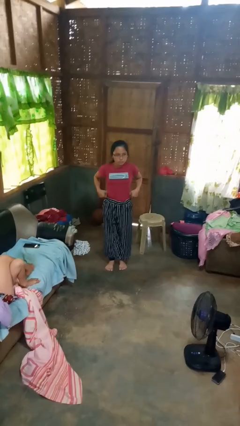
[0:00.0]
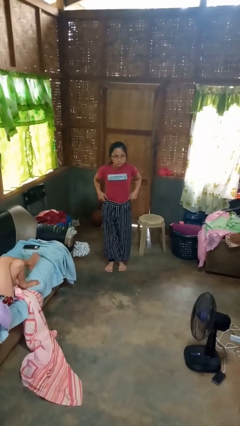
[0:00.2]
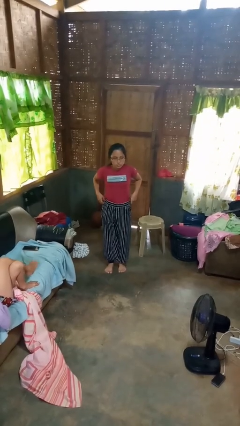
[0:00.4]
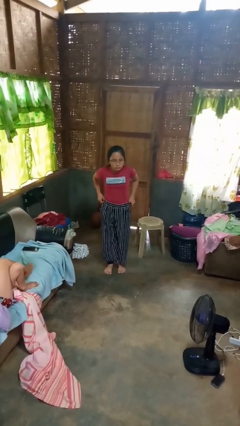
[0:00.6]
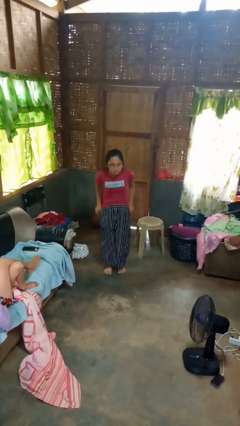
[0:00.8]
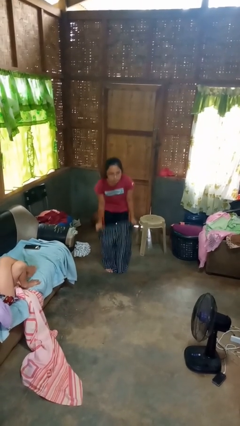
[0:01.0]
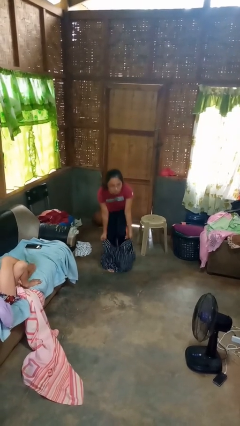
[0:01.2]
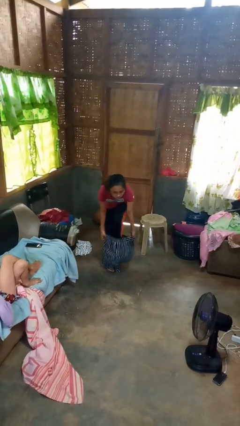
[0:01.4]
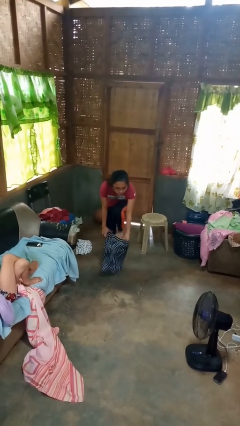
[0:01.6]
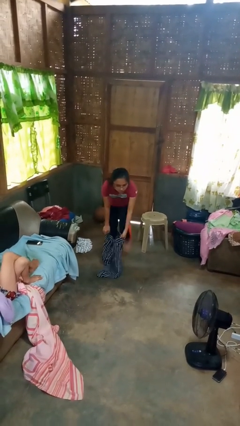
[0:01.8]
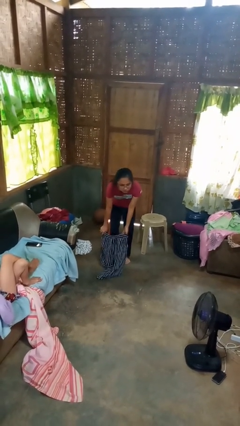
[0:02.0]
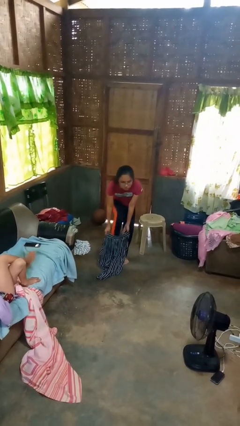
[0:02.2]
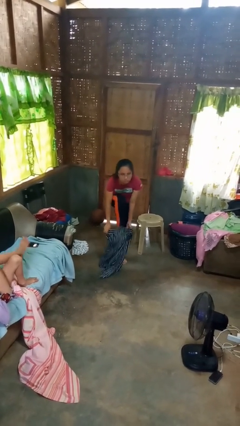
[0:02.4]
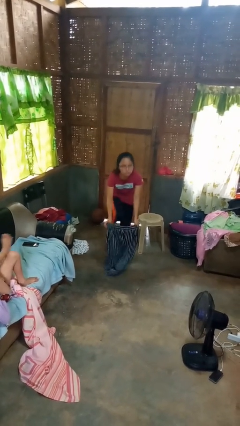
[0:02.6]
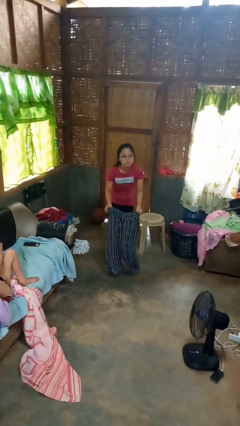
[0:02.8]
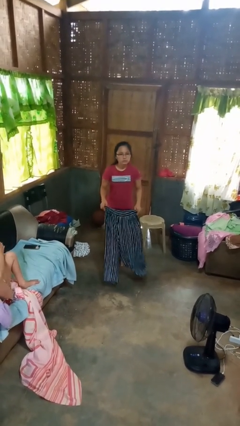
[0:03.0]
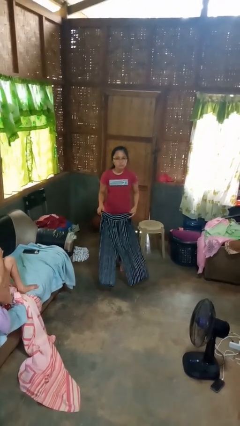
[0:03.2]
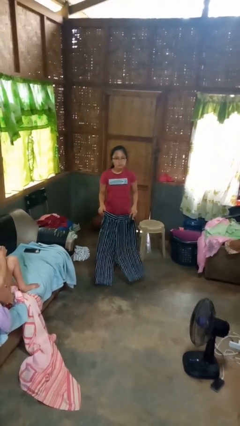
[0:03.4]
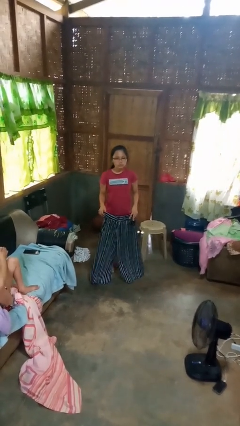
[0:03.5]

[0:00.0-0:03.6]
person takes off pants

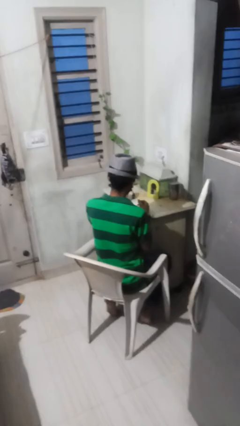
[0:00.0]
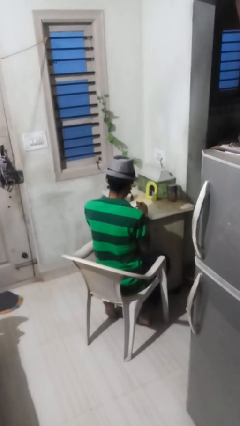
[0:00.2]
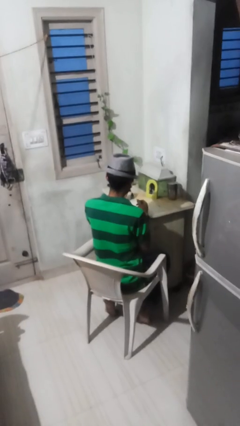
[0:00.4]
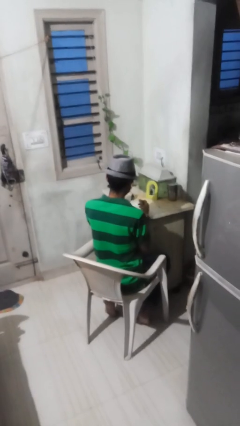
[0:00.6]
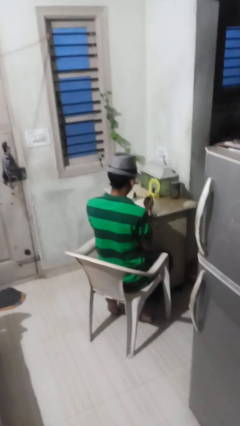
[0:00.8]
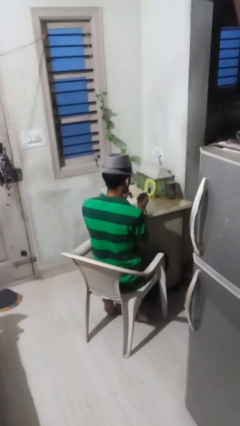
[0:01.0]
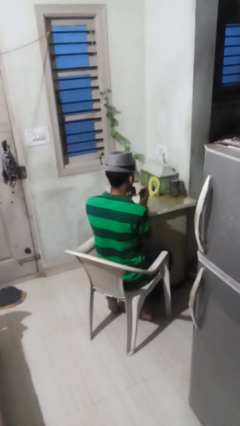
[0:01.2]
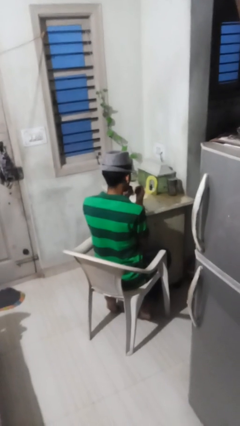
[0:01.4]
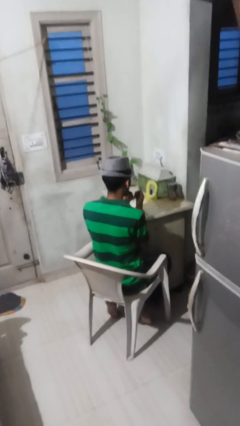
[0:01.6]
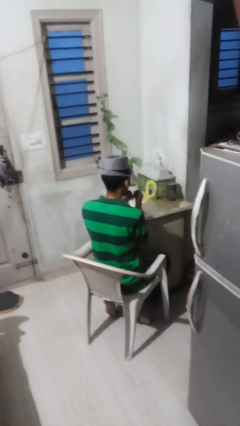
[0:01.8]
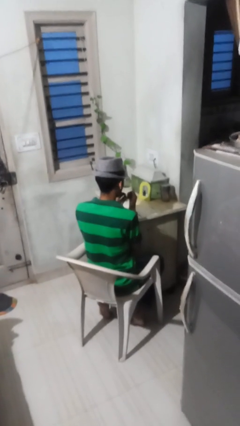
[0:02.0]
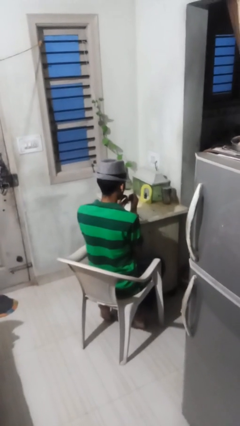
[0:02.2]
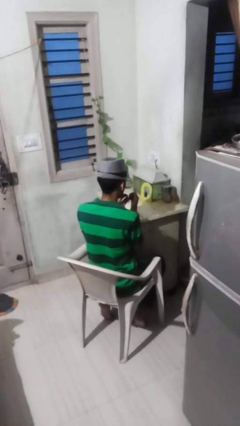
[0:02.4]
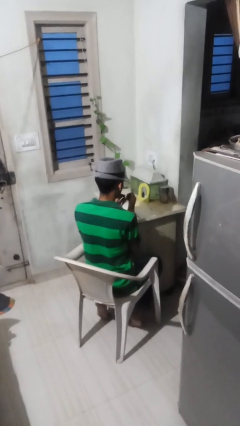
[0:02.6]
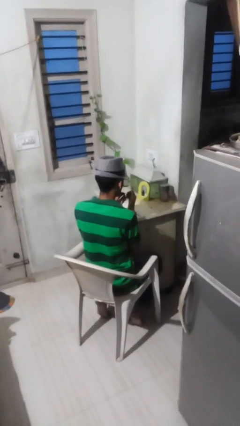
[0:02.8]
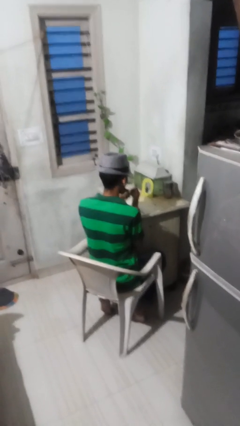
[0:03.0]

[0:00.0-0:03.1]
person paints fingernails

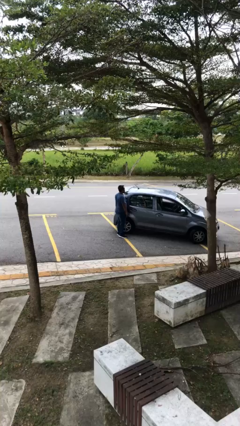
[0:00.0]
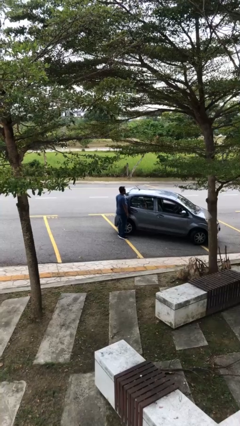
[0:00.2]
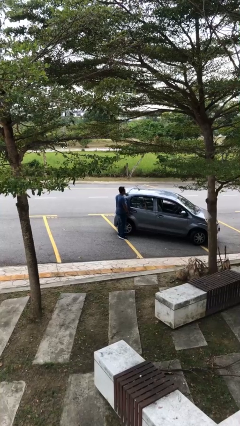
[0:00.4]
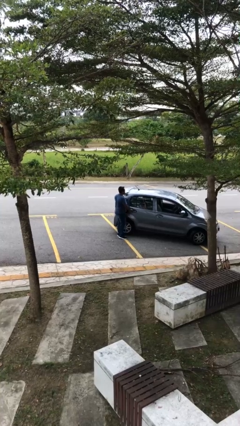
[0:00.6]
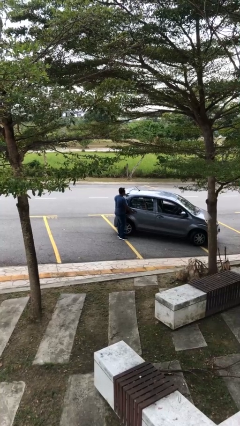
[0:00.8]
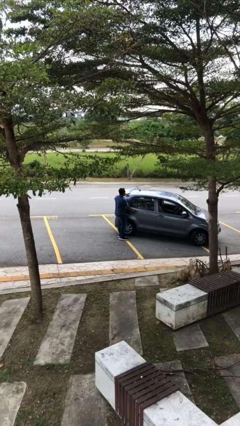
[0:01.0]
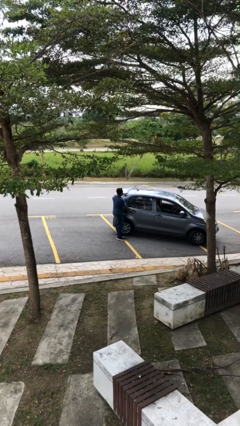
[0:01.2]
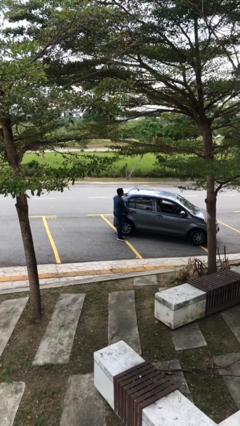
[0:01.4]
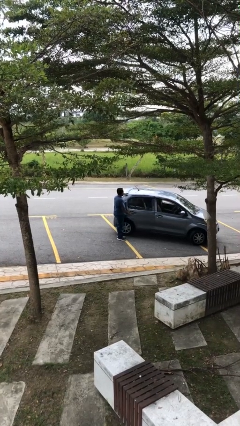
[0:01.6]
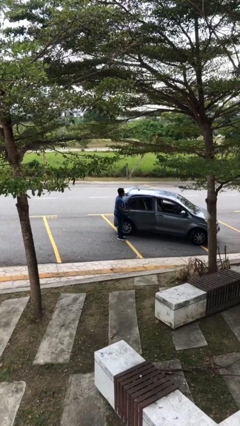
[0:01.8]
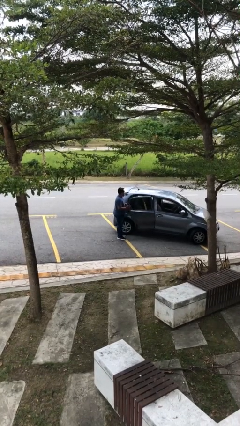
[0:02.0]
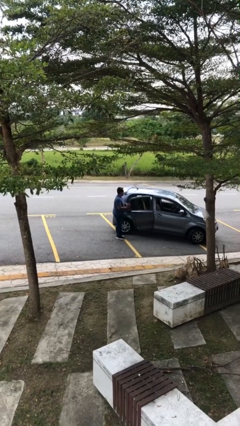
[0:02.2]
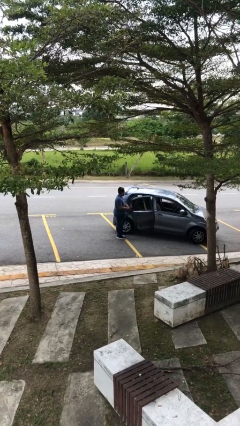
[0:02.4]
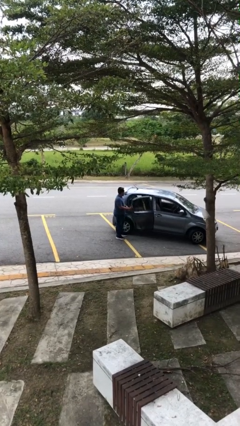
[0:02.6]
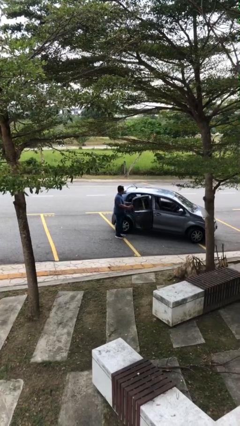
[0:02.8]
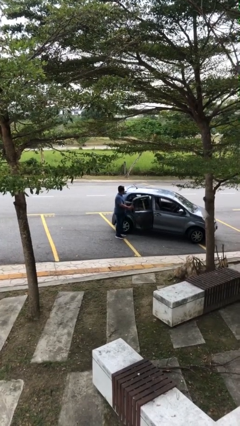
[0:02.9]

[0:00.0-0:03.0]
person opens car door

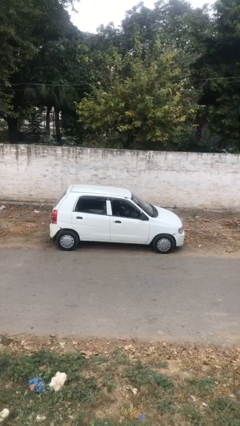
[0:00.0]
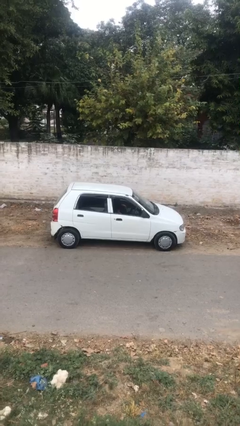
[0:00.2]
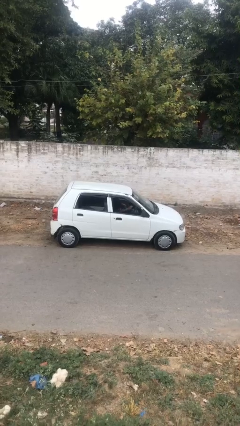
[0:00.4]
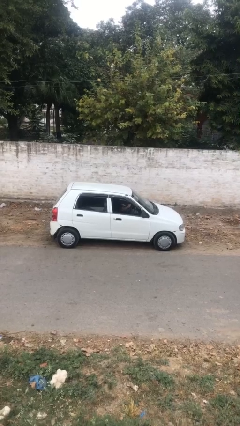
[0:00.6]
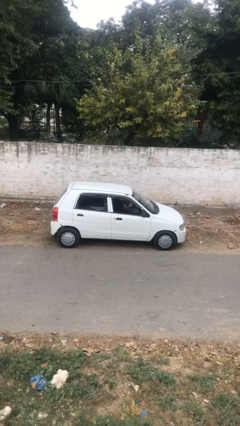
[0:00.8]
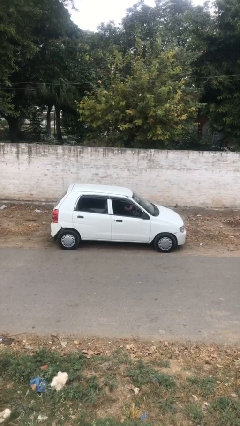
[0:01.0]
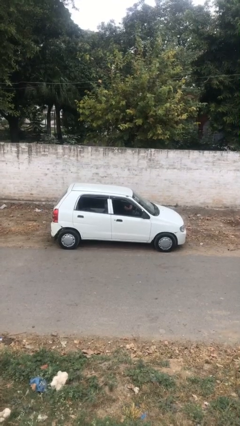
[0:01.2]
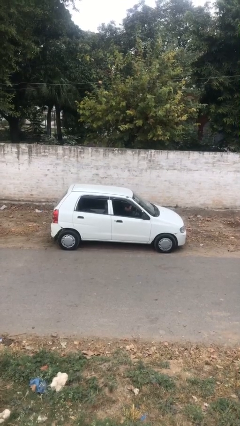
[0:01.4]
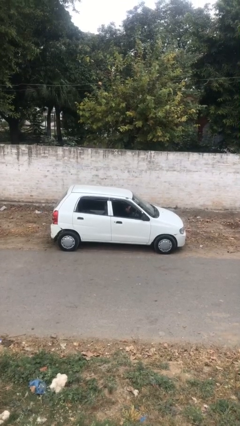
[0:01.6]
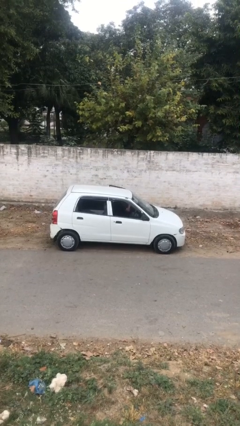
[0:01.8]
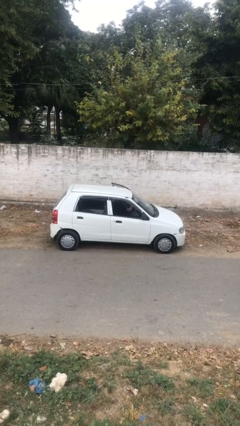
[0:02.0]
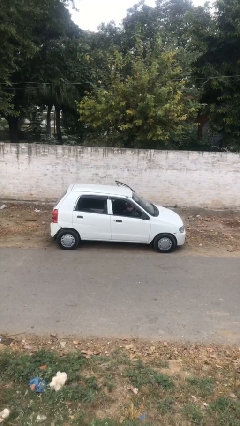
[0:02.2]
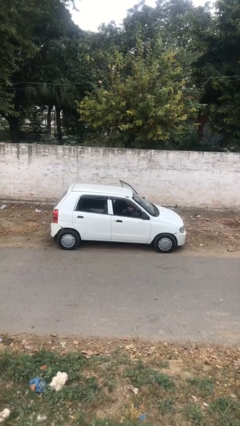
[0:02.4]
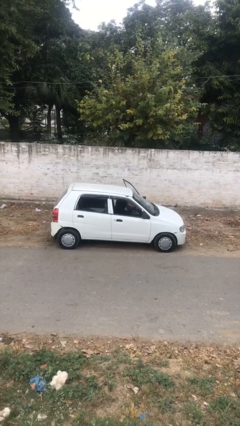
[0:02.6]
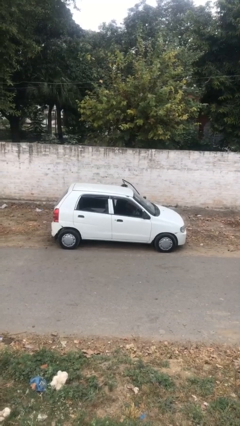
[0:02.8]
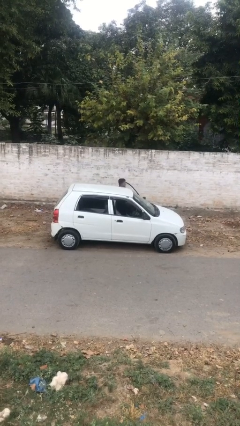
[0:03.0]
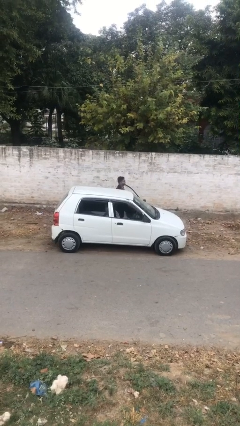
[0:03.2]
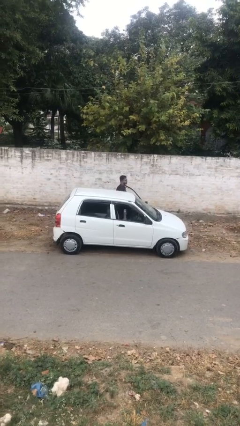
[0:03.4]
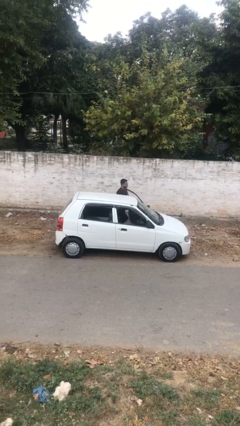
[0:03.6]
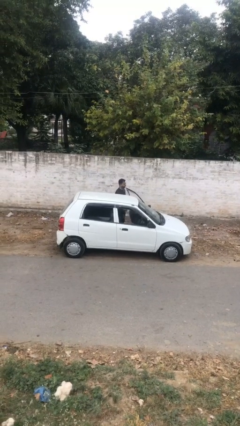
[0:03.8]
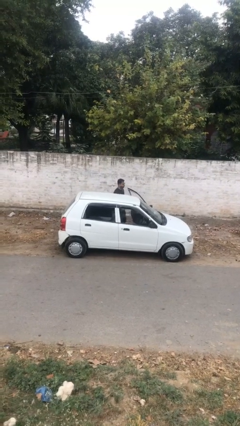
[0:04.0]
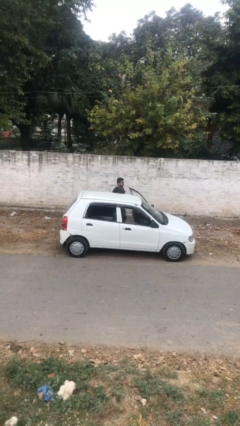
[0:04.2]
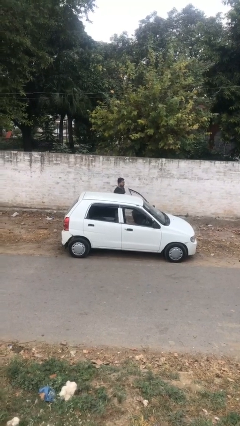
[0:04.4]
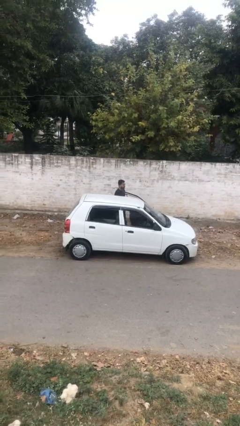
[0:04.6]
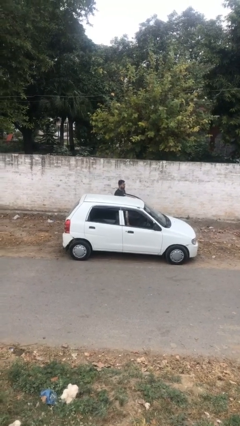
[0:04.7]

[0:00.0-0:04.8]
person exits car

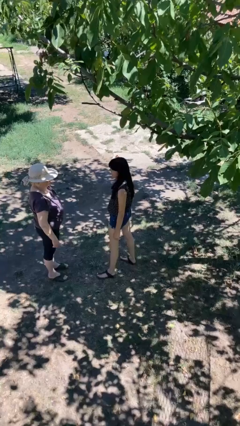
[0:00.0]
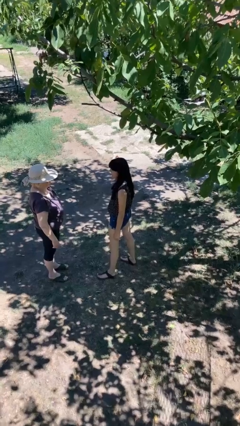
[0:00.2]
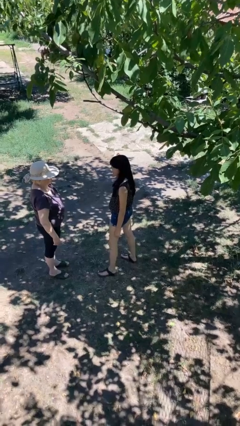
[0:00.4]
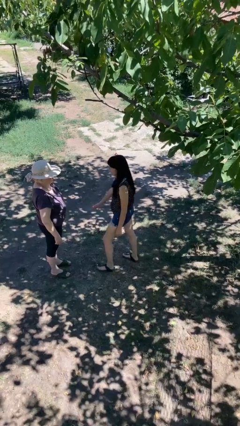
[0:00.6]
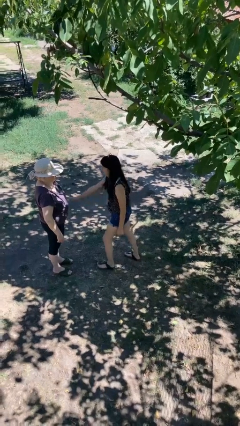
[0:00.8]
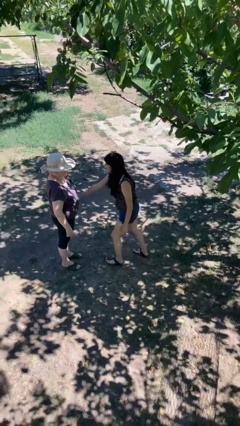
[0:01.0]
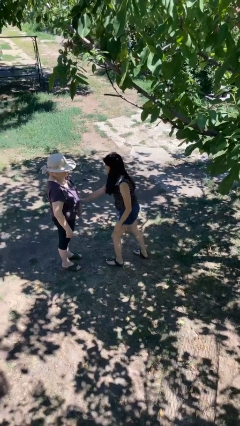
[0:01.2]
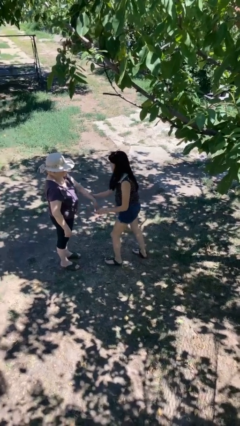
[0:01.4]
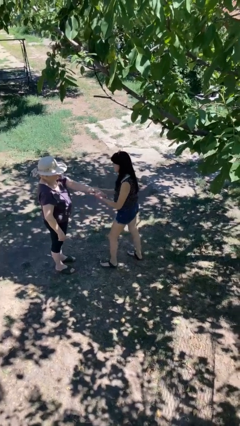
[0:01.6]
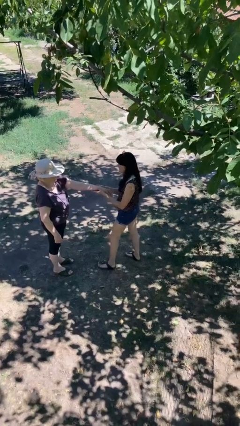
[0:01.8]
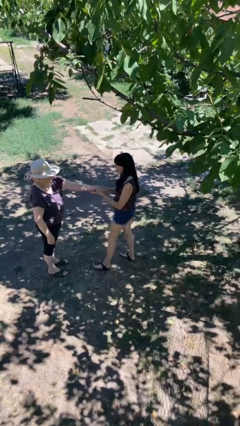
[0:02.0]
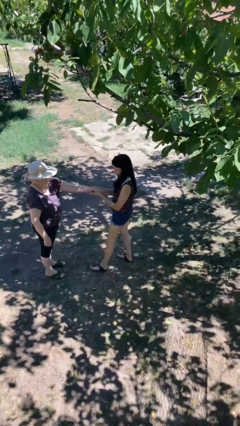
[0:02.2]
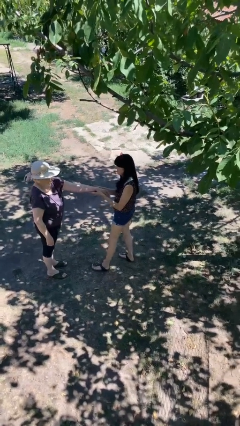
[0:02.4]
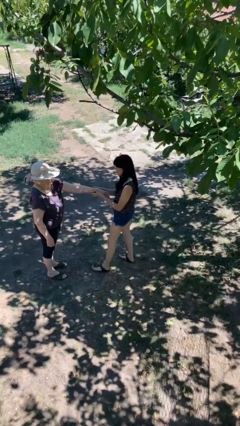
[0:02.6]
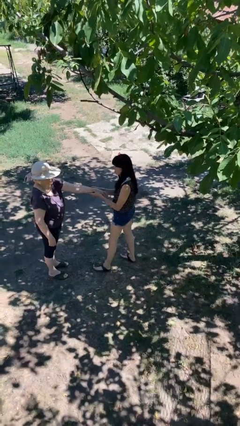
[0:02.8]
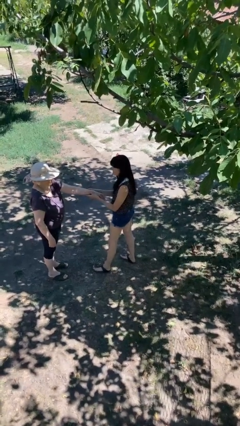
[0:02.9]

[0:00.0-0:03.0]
person grabs person by forearm
